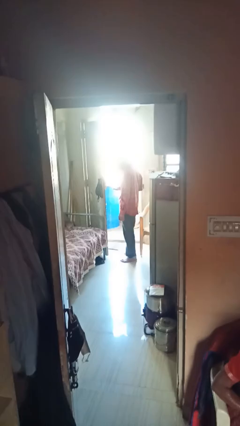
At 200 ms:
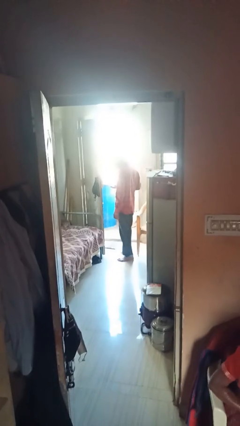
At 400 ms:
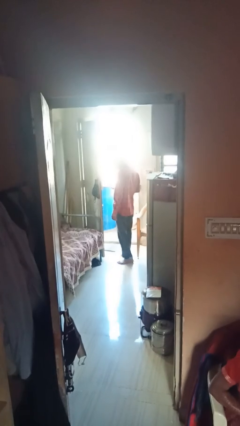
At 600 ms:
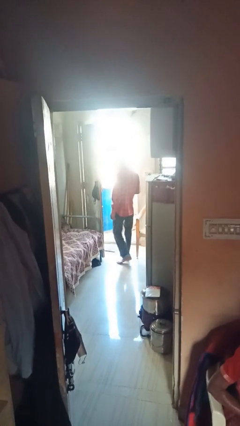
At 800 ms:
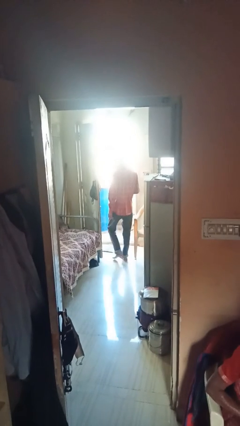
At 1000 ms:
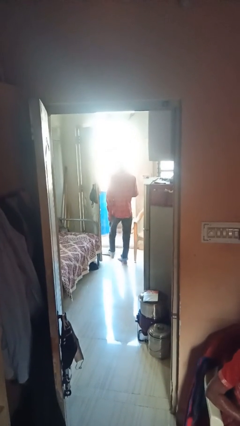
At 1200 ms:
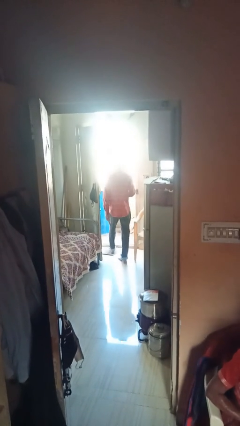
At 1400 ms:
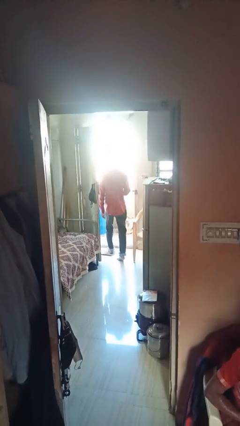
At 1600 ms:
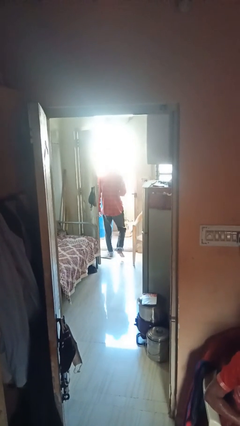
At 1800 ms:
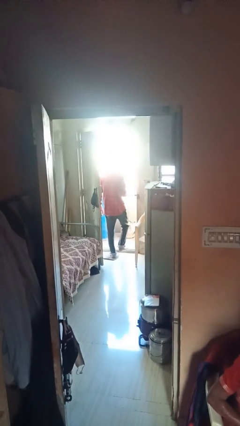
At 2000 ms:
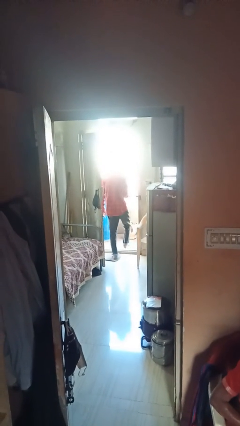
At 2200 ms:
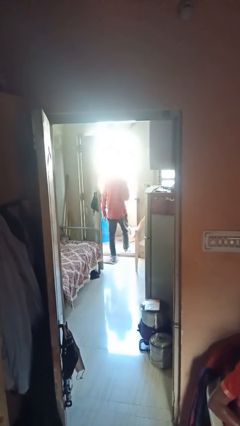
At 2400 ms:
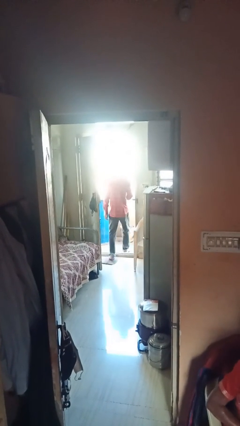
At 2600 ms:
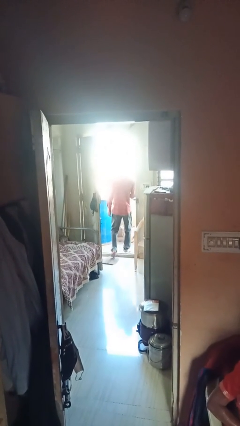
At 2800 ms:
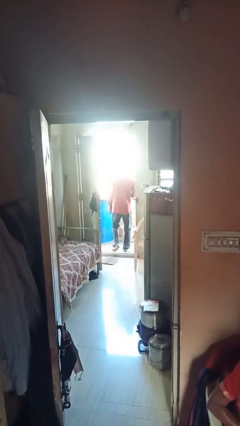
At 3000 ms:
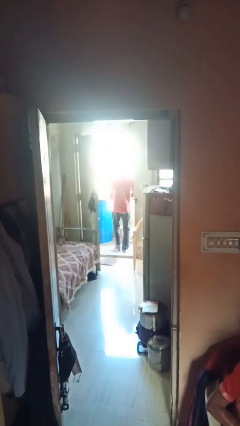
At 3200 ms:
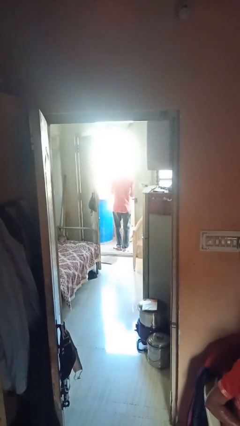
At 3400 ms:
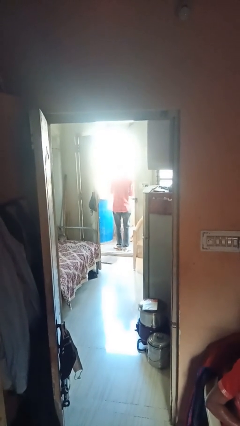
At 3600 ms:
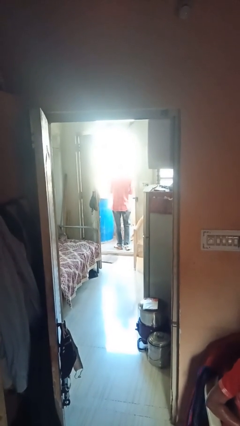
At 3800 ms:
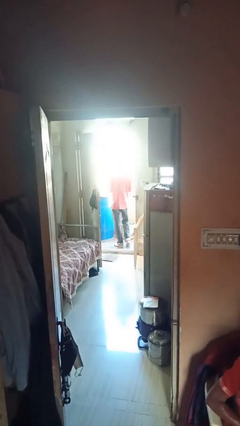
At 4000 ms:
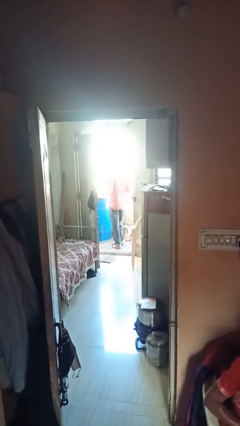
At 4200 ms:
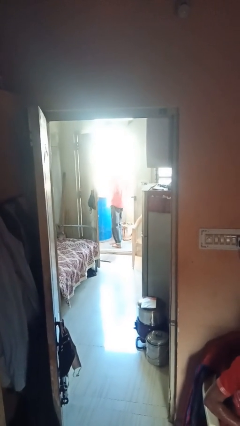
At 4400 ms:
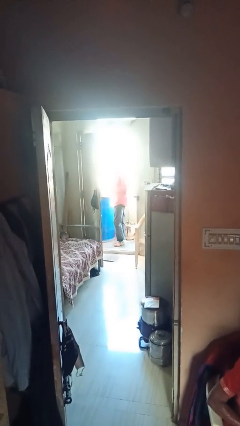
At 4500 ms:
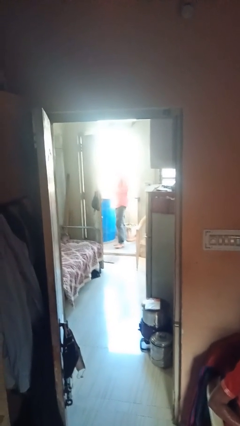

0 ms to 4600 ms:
person exits scene through structure

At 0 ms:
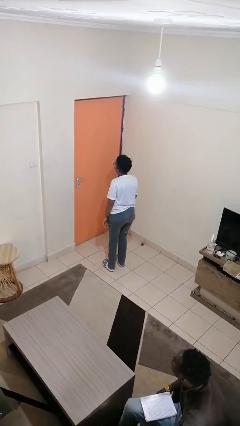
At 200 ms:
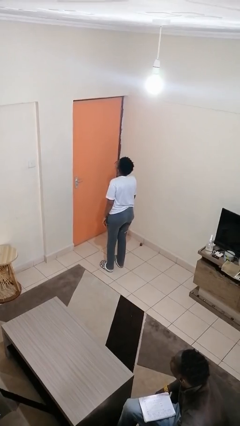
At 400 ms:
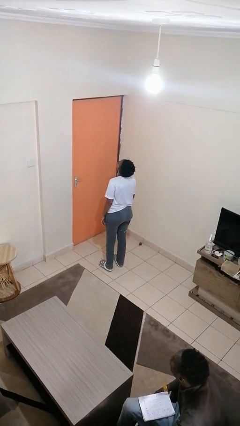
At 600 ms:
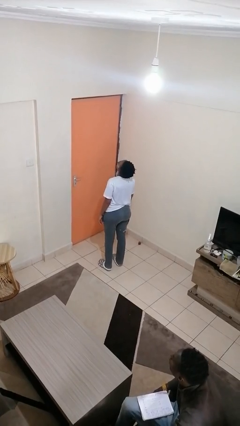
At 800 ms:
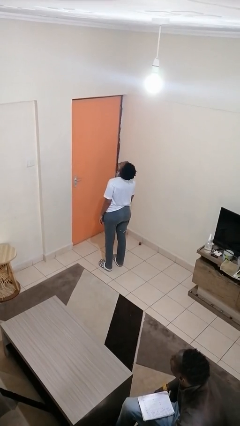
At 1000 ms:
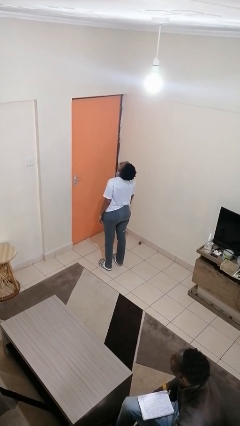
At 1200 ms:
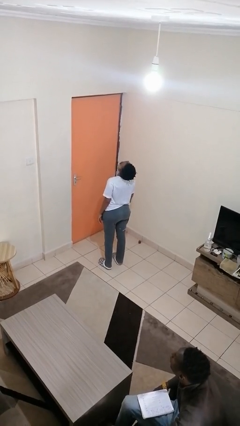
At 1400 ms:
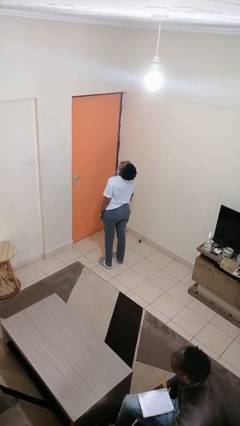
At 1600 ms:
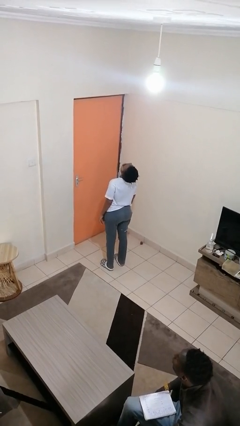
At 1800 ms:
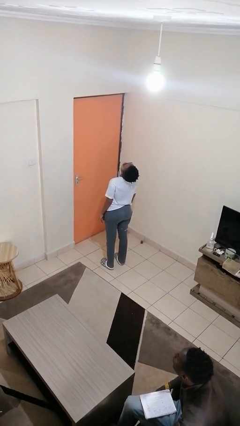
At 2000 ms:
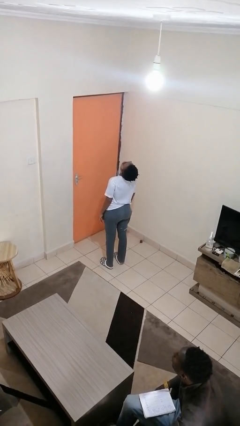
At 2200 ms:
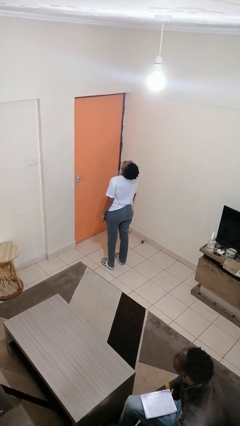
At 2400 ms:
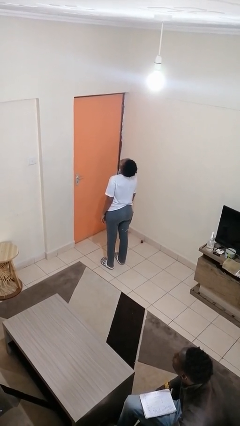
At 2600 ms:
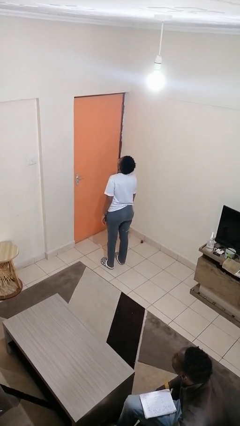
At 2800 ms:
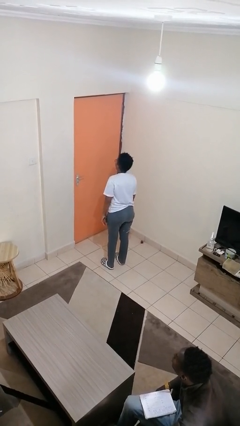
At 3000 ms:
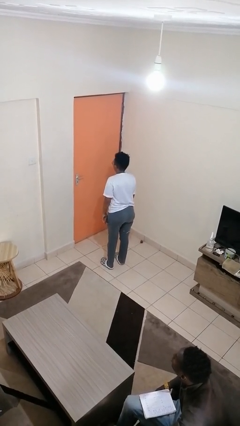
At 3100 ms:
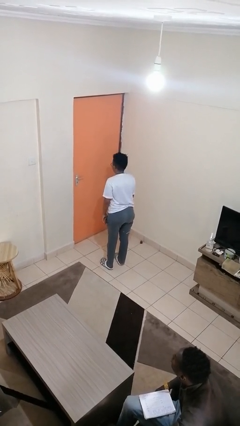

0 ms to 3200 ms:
person yawns

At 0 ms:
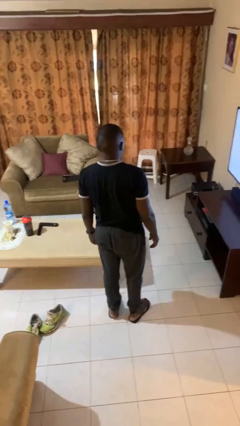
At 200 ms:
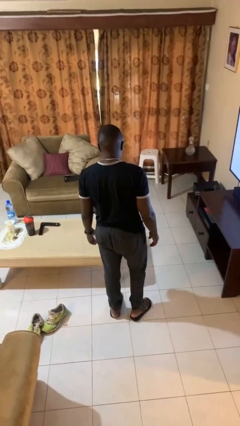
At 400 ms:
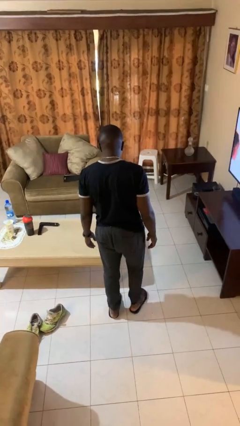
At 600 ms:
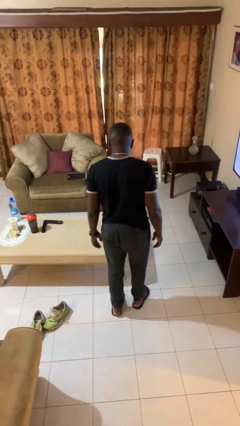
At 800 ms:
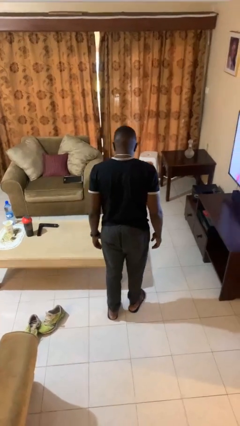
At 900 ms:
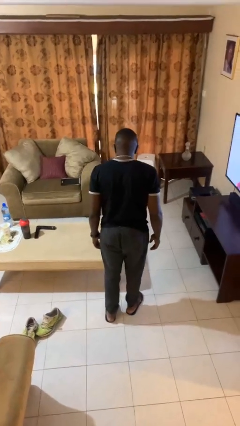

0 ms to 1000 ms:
person bumps into table

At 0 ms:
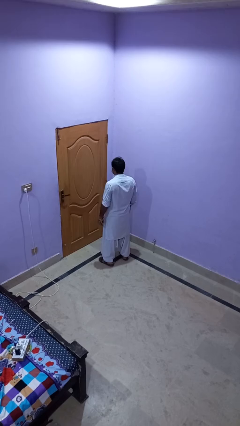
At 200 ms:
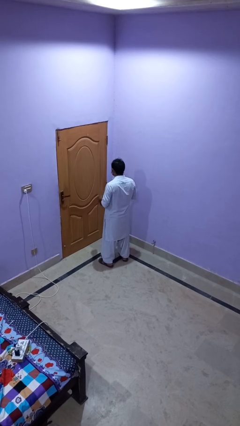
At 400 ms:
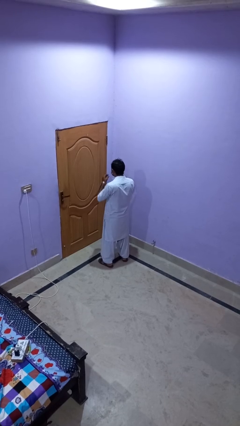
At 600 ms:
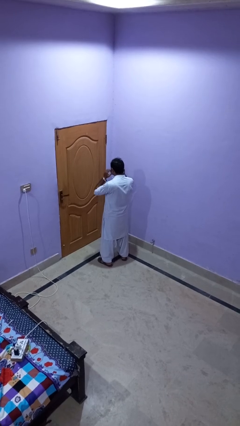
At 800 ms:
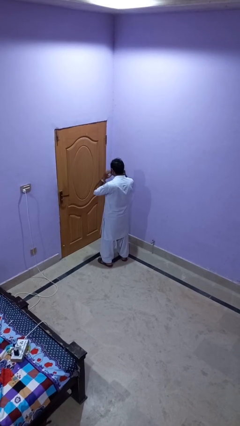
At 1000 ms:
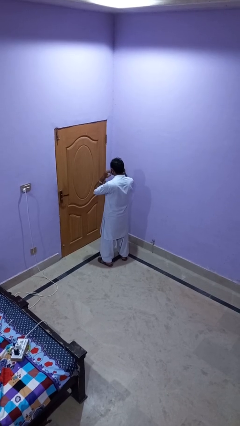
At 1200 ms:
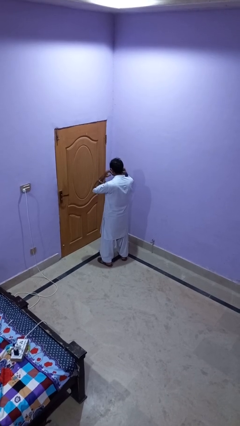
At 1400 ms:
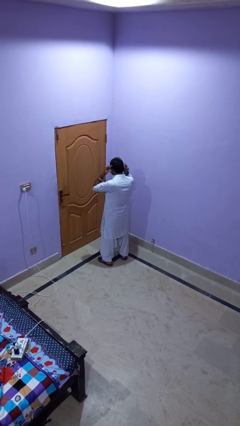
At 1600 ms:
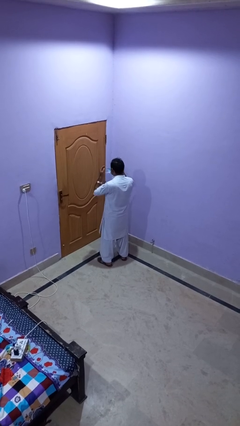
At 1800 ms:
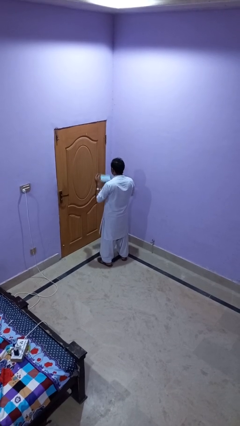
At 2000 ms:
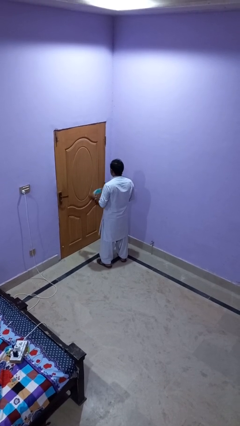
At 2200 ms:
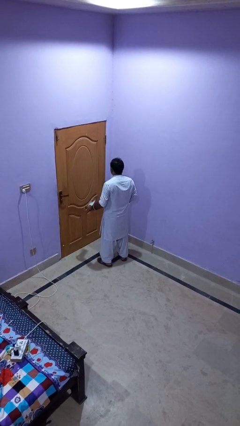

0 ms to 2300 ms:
person takes off facemask

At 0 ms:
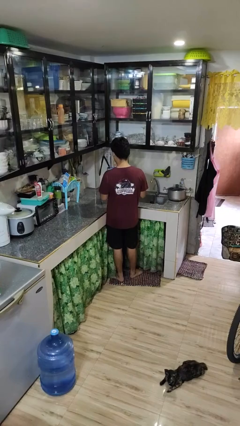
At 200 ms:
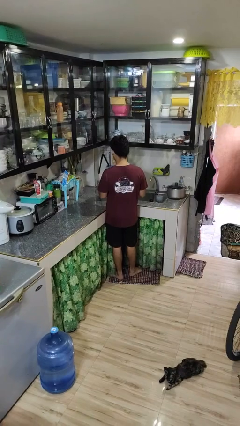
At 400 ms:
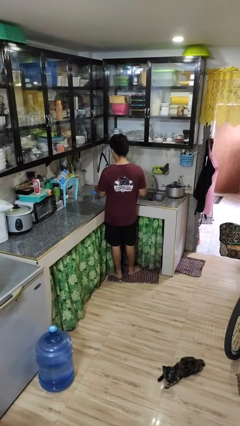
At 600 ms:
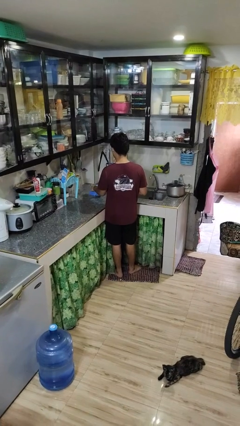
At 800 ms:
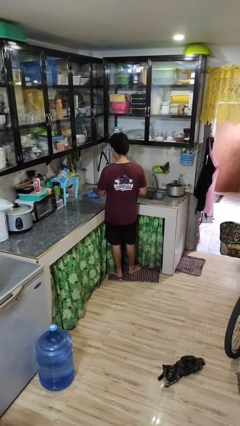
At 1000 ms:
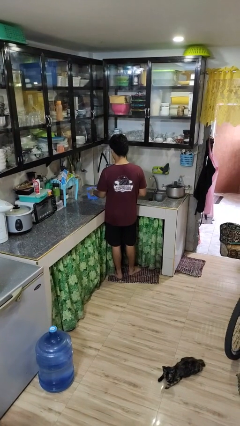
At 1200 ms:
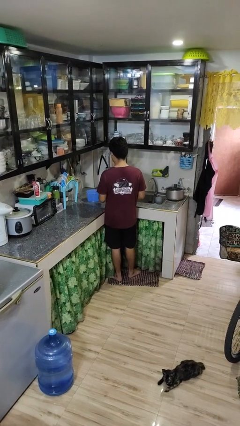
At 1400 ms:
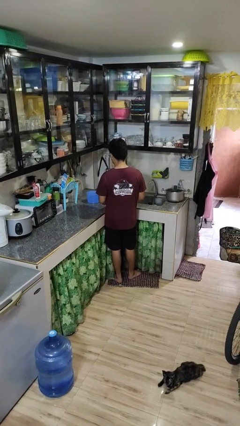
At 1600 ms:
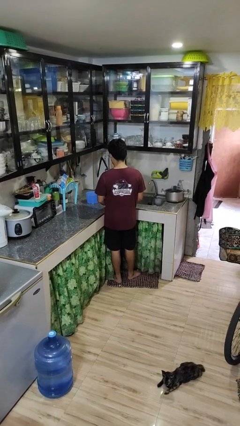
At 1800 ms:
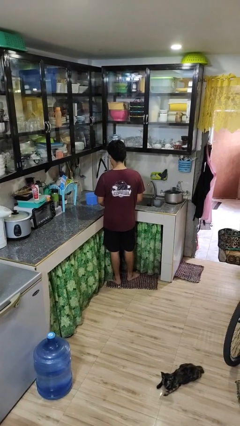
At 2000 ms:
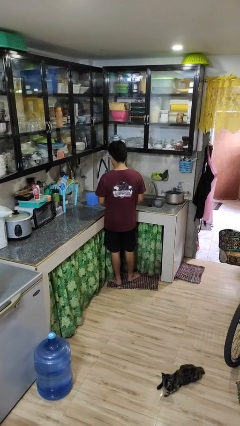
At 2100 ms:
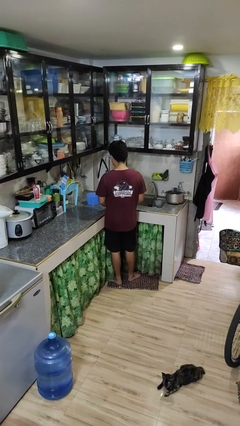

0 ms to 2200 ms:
person puts down object on countertop

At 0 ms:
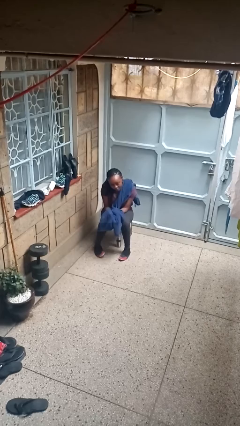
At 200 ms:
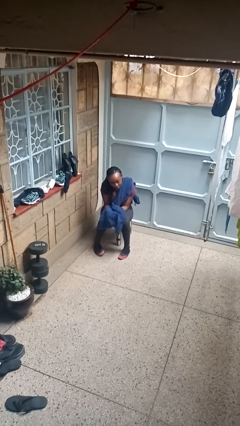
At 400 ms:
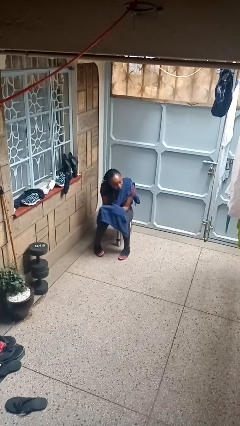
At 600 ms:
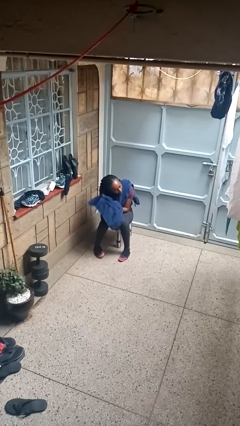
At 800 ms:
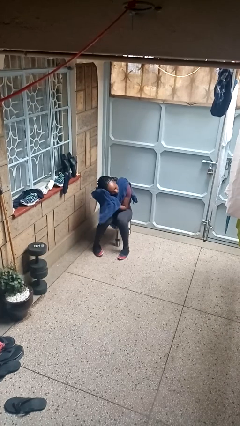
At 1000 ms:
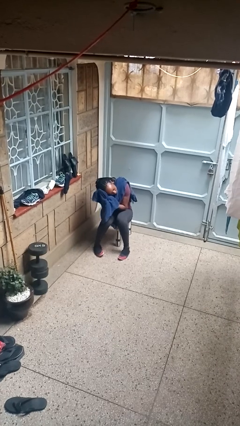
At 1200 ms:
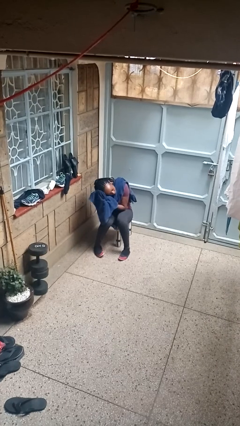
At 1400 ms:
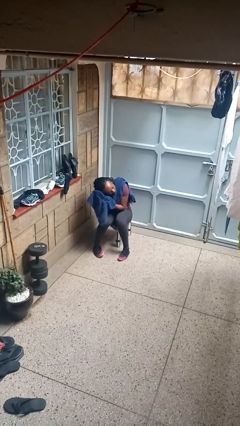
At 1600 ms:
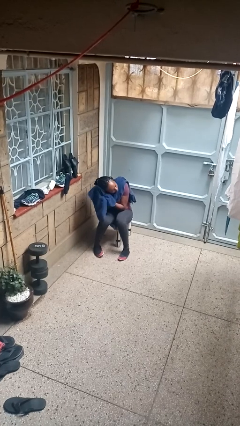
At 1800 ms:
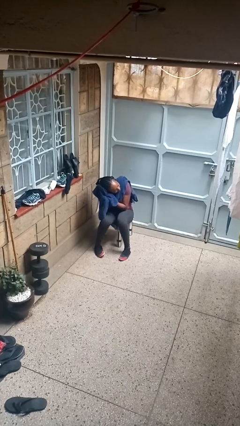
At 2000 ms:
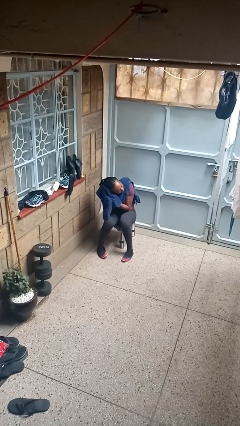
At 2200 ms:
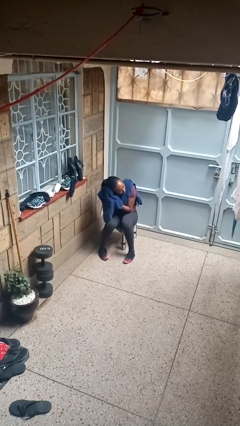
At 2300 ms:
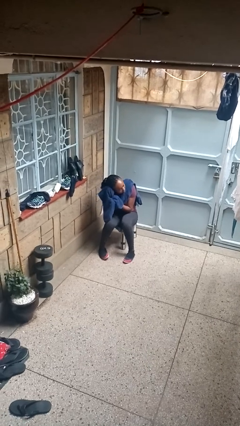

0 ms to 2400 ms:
person dries hair with towel

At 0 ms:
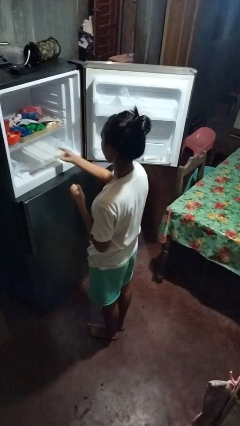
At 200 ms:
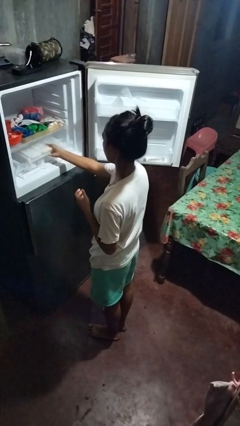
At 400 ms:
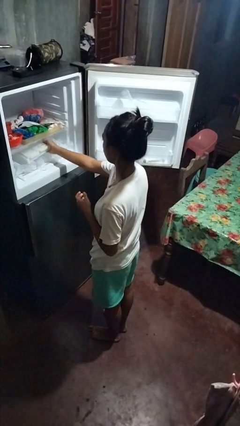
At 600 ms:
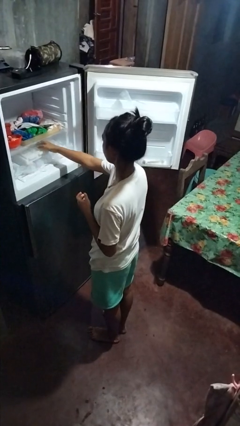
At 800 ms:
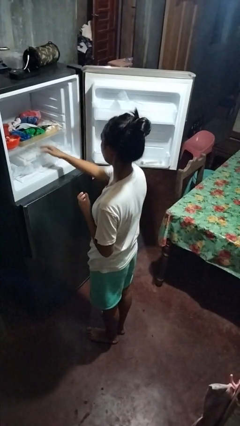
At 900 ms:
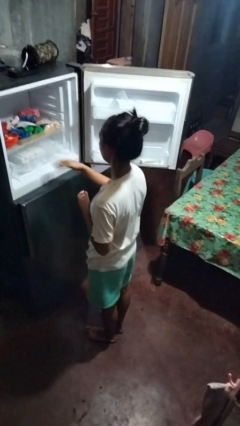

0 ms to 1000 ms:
person puts object into refrigerator

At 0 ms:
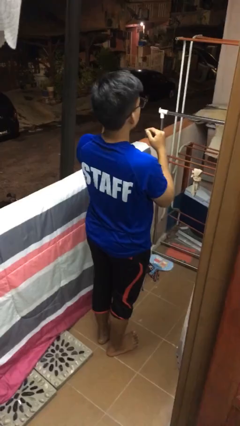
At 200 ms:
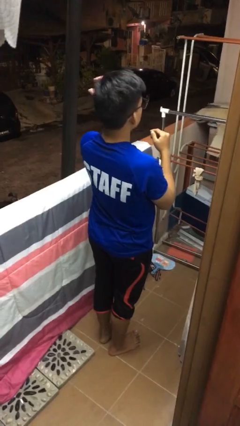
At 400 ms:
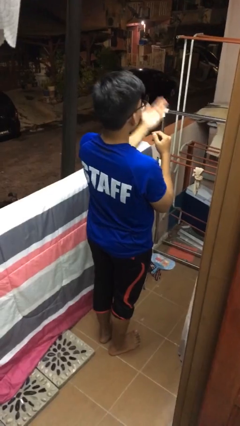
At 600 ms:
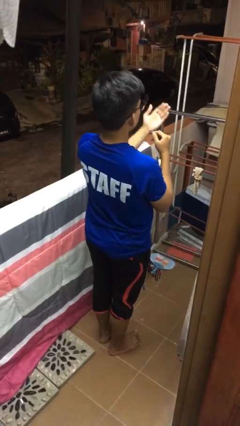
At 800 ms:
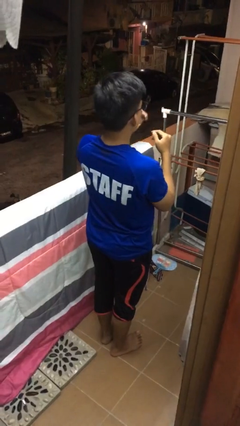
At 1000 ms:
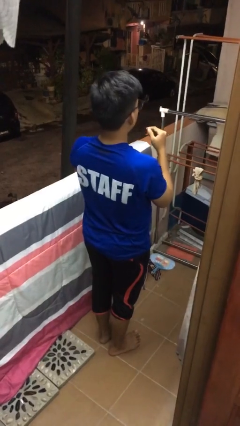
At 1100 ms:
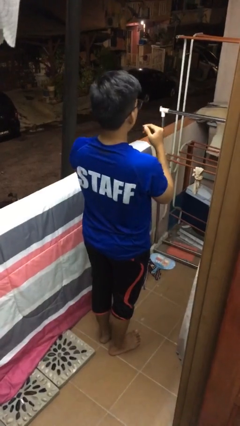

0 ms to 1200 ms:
person karate chop
